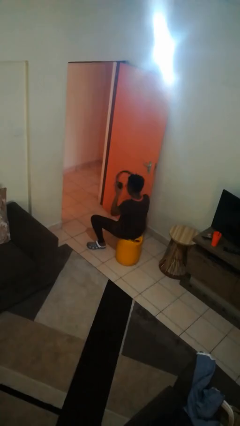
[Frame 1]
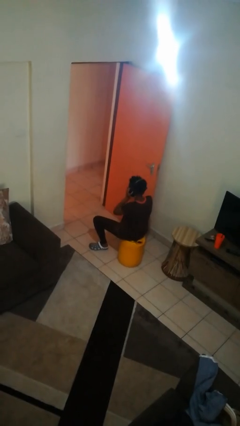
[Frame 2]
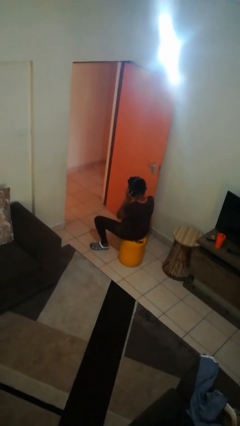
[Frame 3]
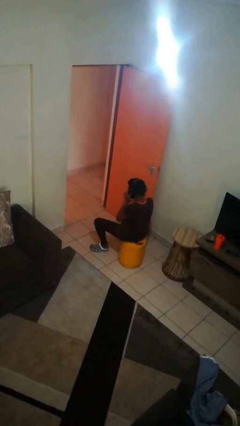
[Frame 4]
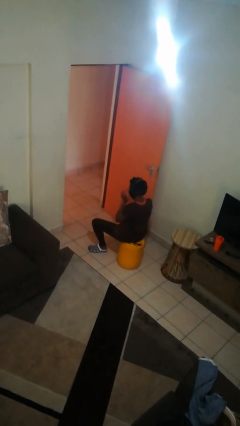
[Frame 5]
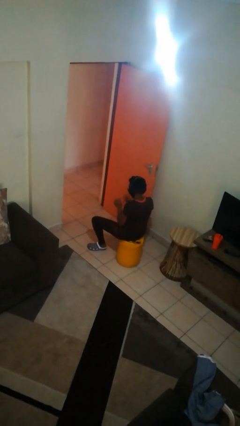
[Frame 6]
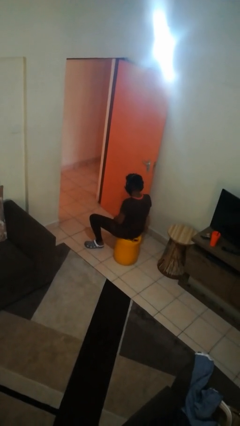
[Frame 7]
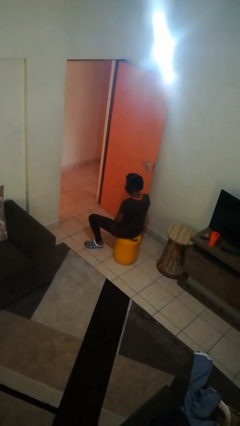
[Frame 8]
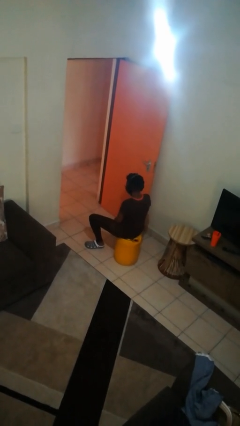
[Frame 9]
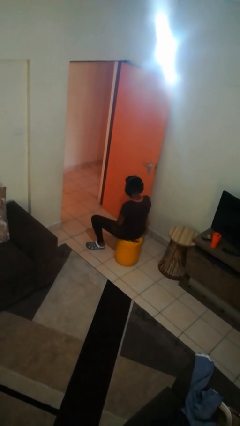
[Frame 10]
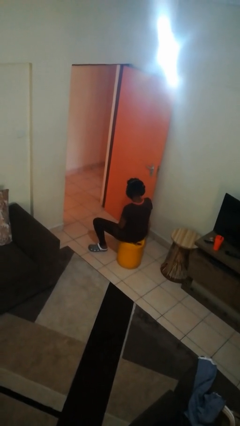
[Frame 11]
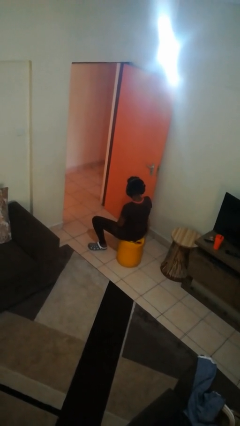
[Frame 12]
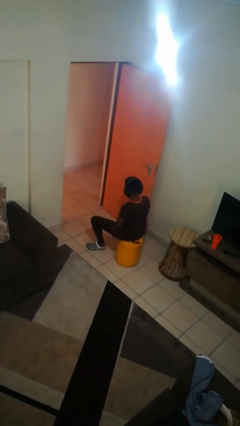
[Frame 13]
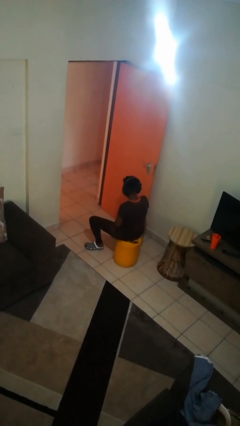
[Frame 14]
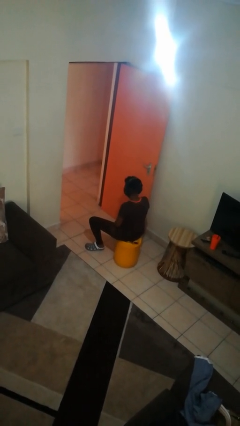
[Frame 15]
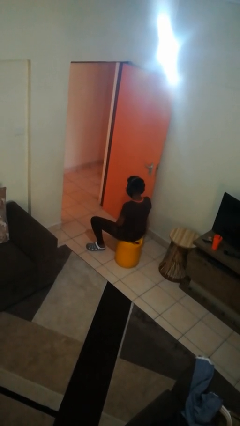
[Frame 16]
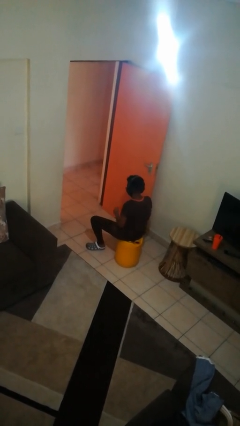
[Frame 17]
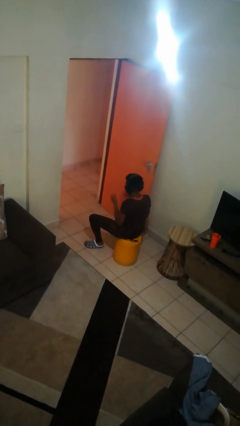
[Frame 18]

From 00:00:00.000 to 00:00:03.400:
person puts on headphones

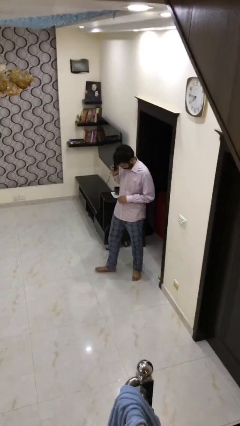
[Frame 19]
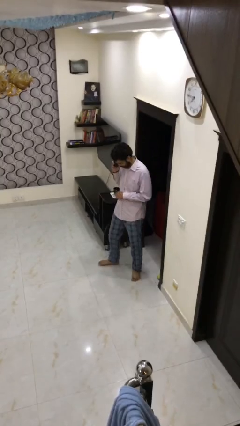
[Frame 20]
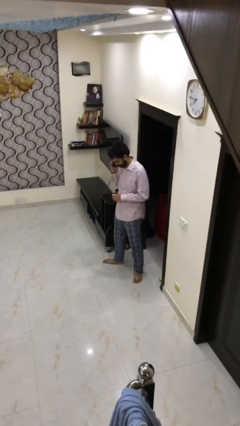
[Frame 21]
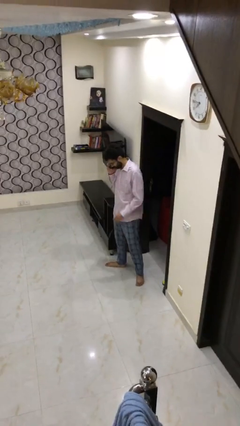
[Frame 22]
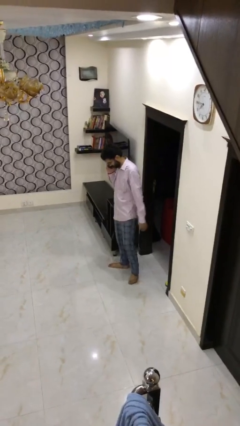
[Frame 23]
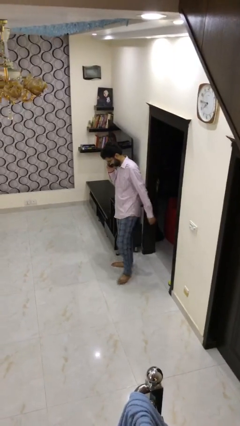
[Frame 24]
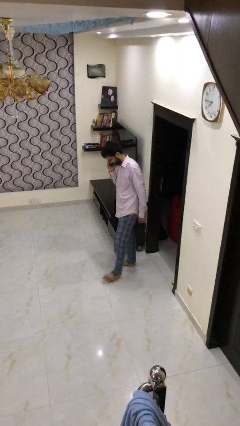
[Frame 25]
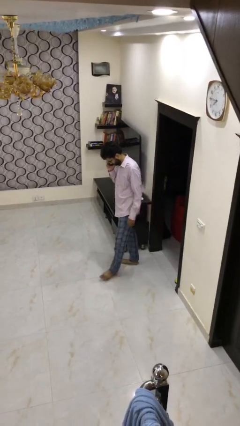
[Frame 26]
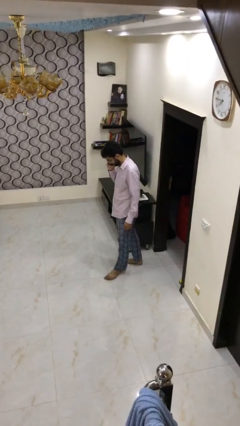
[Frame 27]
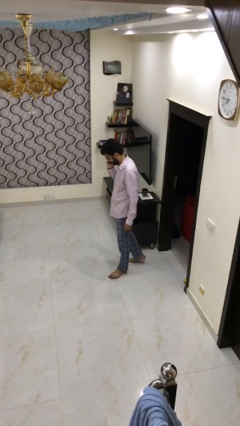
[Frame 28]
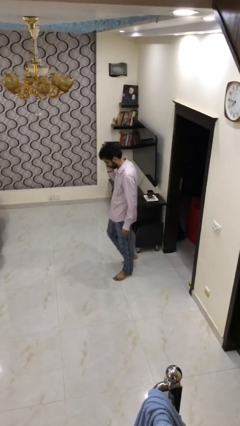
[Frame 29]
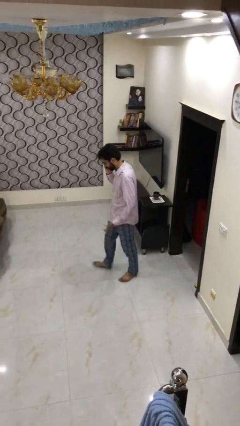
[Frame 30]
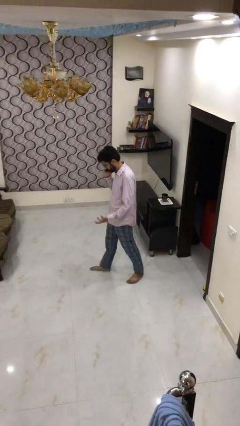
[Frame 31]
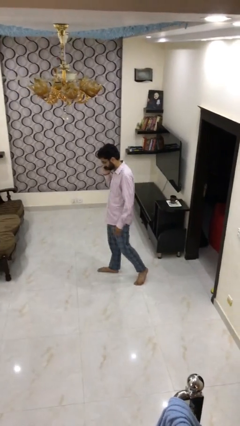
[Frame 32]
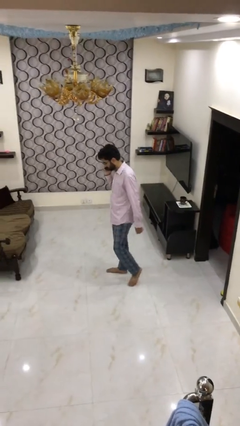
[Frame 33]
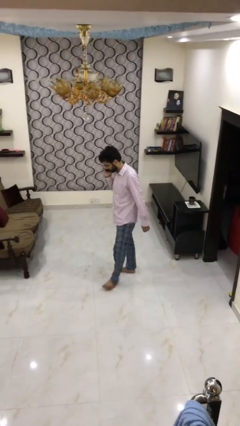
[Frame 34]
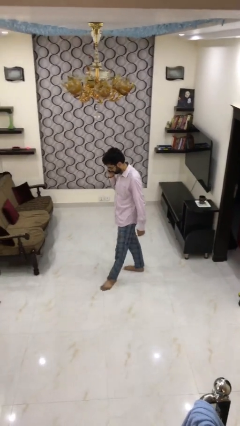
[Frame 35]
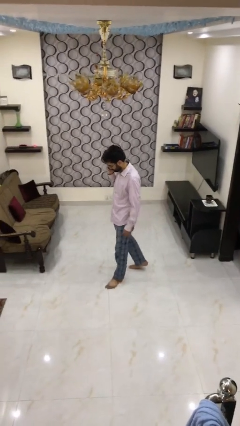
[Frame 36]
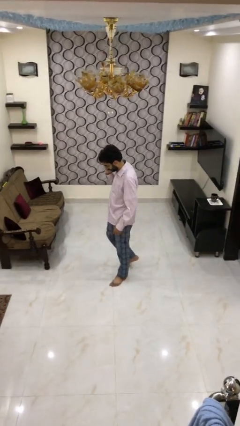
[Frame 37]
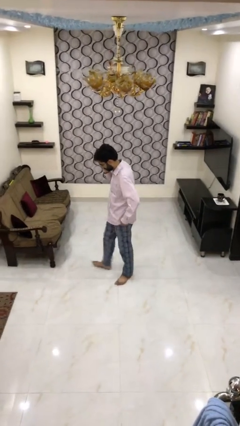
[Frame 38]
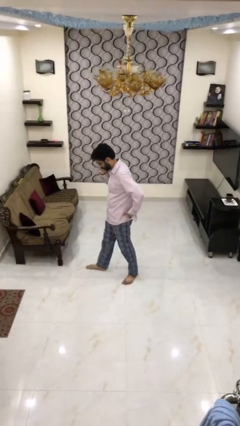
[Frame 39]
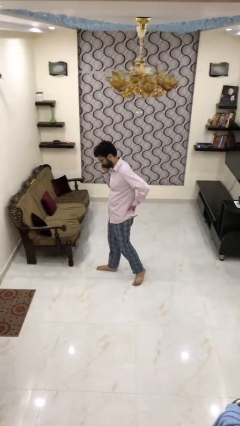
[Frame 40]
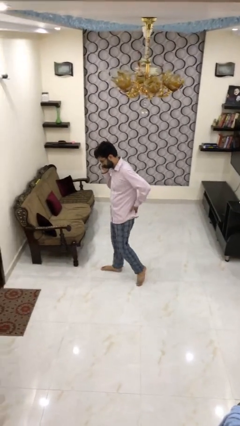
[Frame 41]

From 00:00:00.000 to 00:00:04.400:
person talks on phone

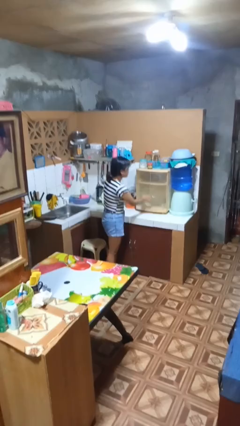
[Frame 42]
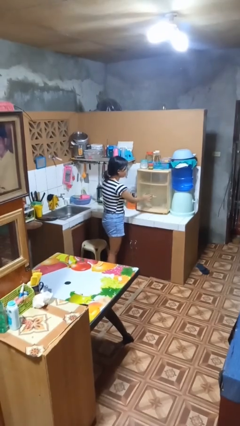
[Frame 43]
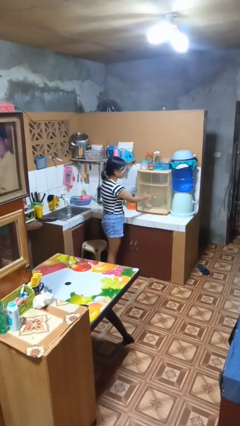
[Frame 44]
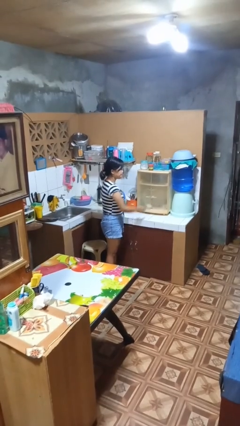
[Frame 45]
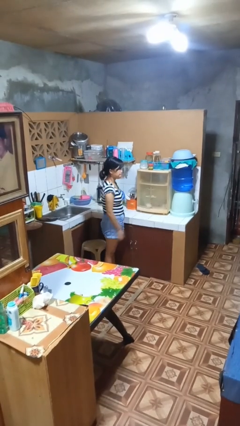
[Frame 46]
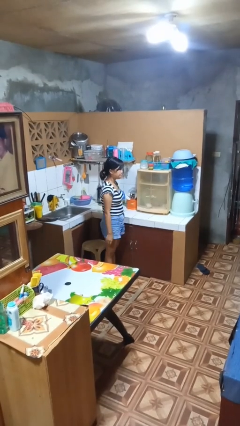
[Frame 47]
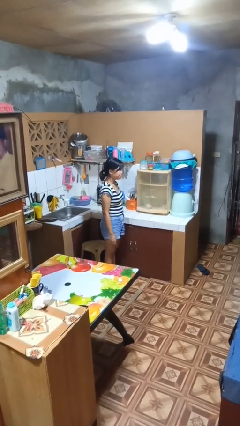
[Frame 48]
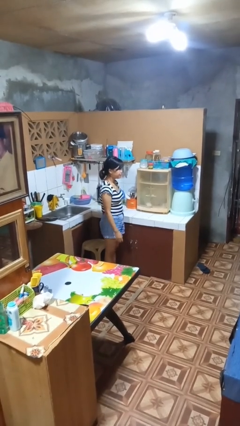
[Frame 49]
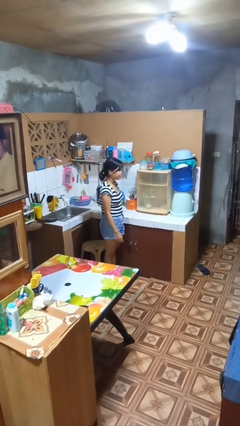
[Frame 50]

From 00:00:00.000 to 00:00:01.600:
person closes cabinet

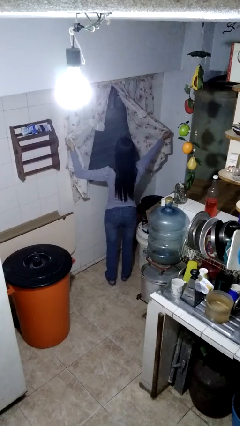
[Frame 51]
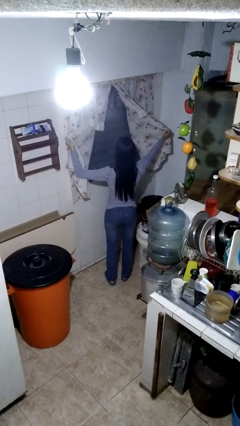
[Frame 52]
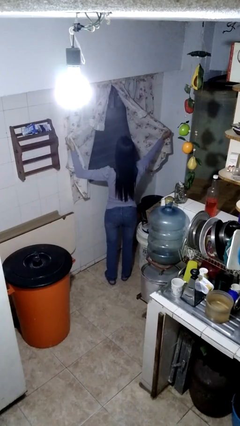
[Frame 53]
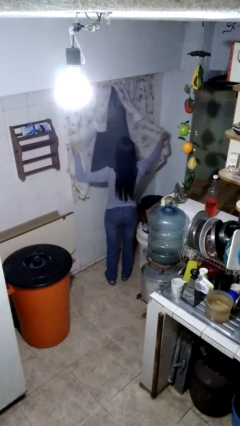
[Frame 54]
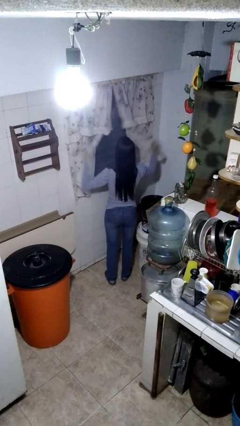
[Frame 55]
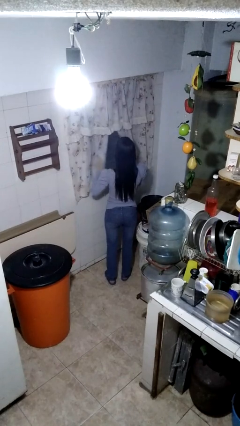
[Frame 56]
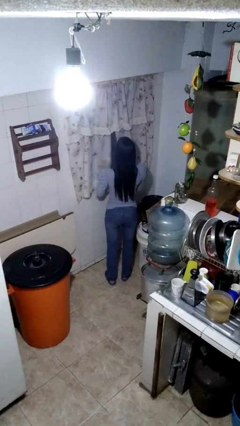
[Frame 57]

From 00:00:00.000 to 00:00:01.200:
person closes curtains

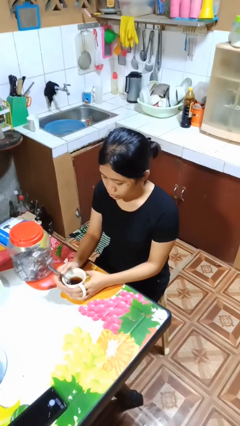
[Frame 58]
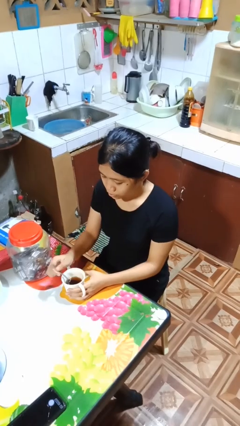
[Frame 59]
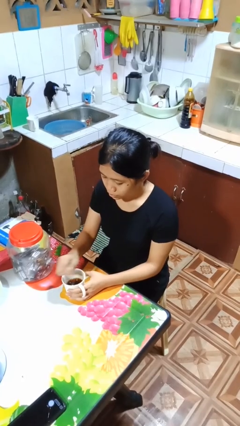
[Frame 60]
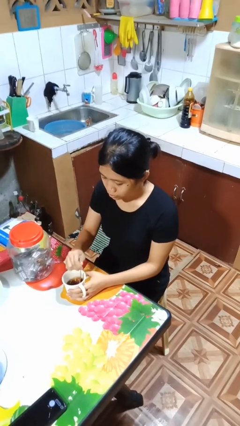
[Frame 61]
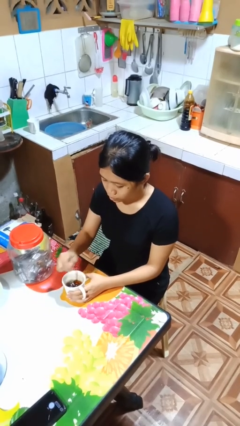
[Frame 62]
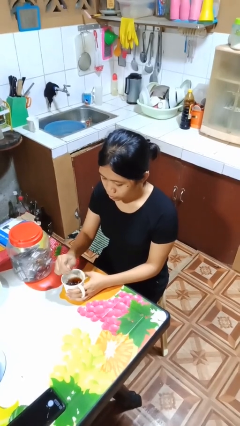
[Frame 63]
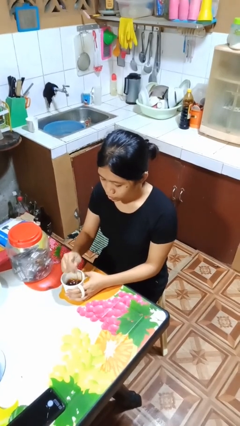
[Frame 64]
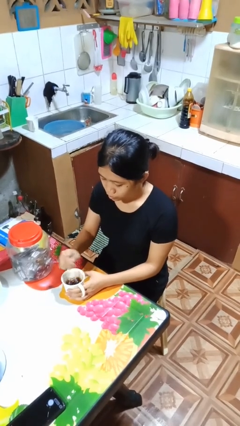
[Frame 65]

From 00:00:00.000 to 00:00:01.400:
person stirs mug

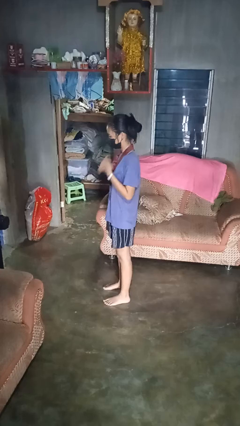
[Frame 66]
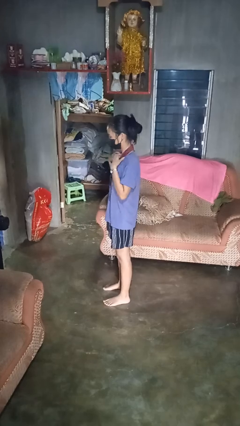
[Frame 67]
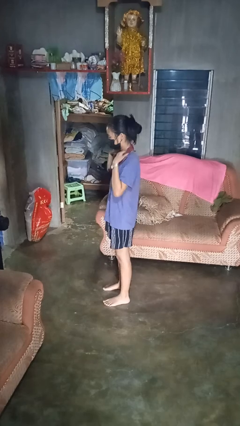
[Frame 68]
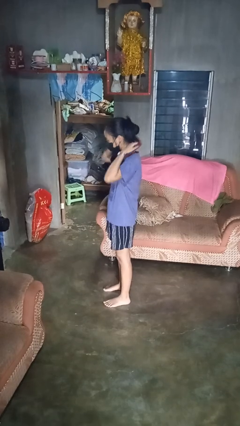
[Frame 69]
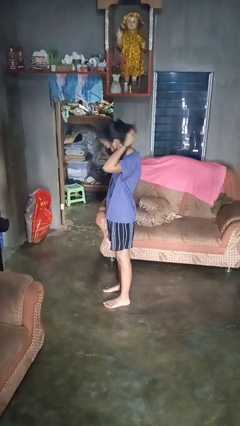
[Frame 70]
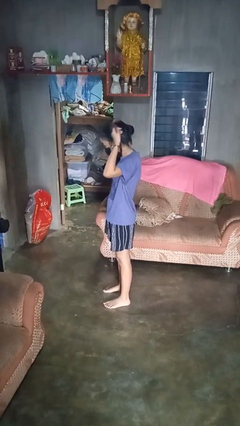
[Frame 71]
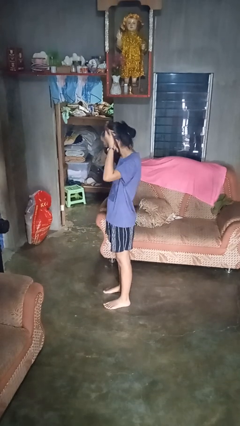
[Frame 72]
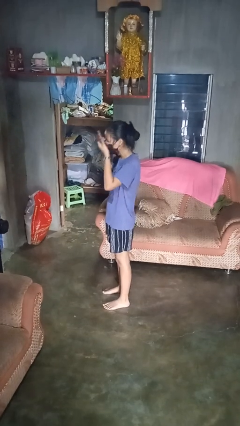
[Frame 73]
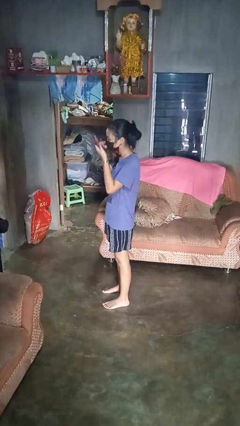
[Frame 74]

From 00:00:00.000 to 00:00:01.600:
person takes off necklace

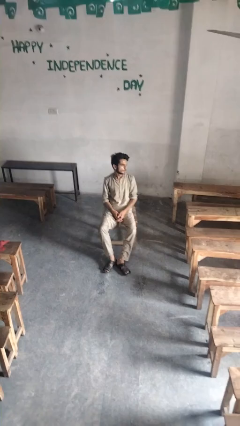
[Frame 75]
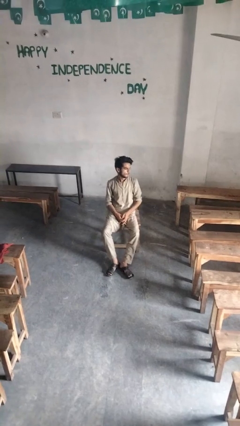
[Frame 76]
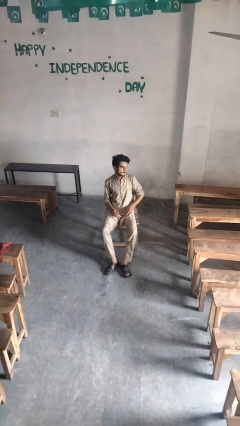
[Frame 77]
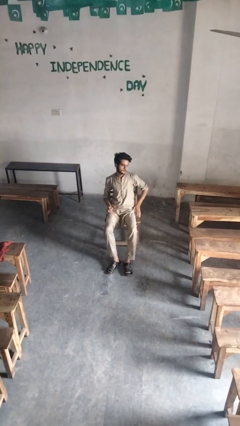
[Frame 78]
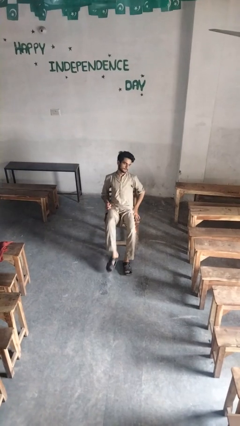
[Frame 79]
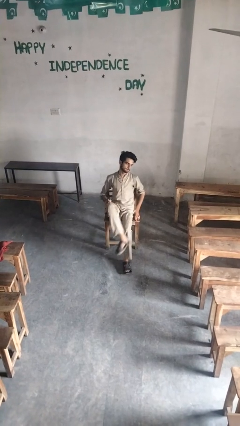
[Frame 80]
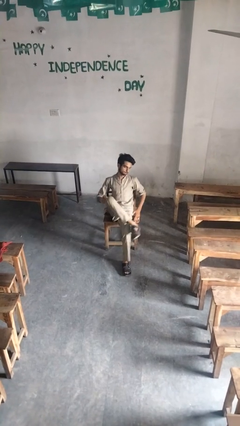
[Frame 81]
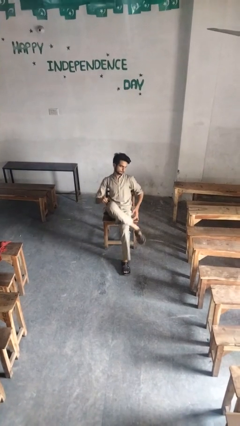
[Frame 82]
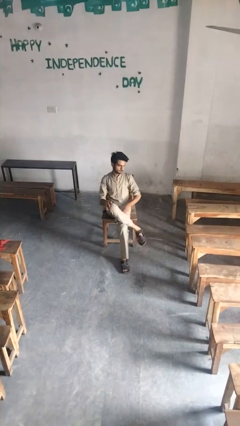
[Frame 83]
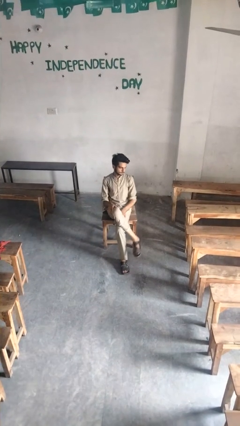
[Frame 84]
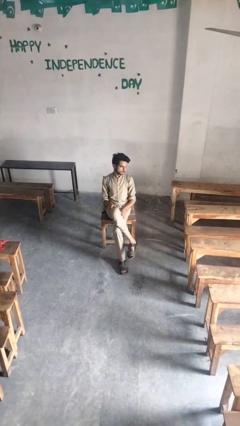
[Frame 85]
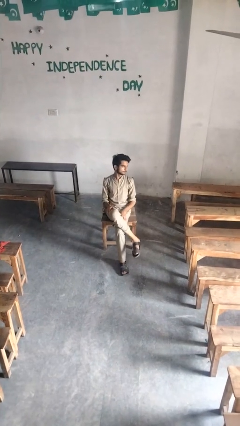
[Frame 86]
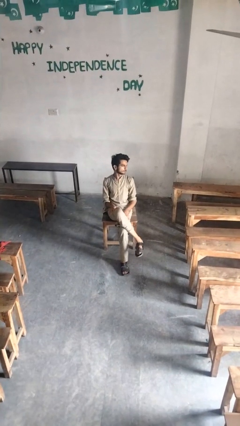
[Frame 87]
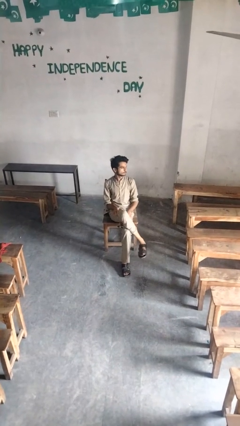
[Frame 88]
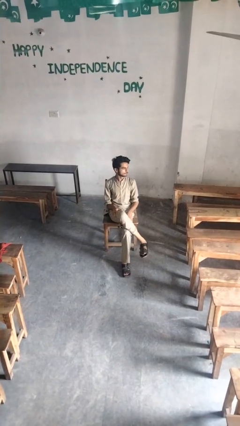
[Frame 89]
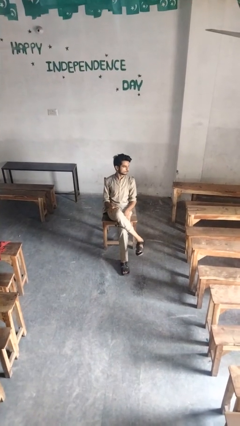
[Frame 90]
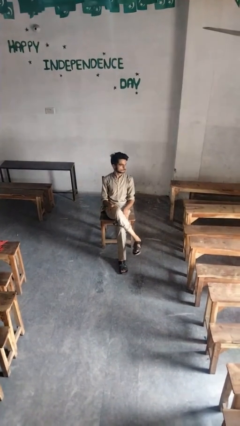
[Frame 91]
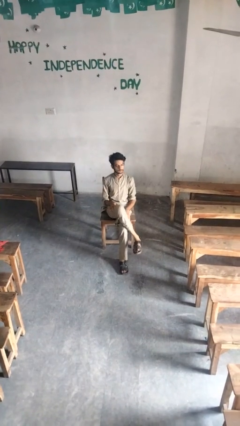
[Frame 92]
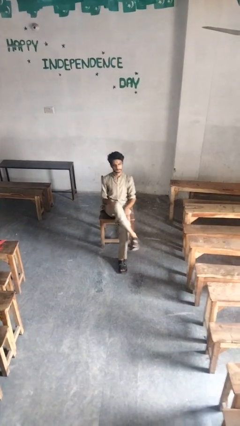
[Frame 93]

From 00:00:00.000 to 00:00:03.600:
person crosses legs
